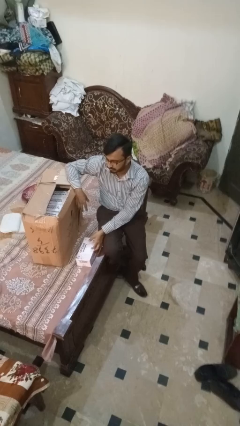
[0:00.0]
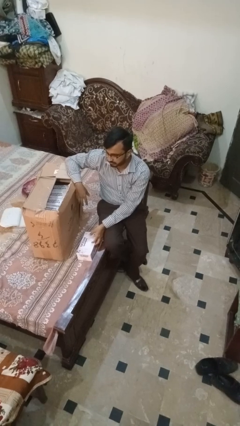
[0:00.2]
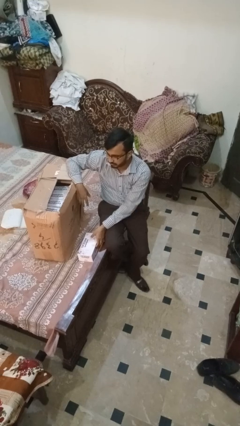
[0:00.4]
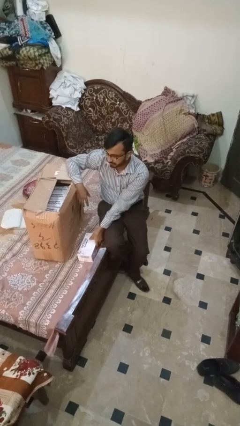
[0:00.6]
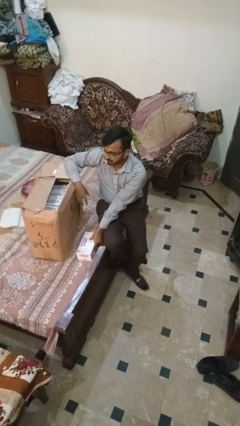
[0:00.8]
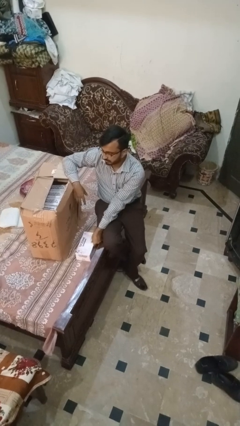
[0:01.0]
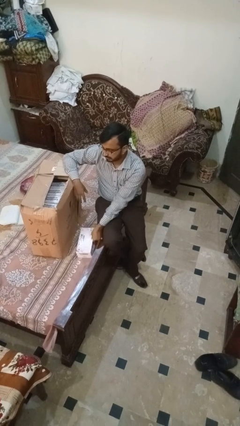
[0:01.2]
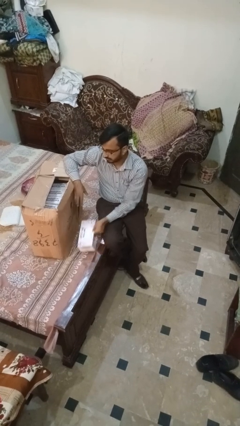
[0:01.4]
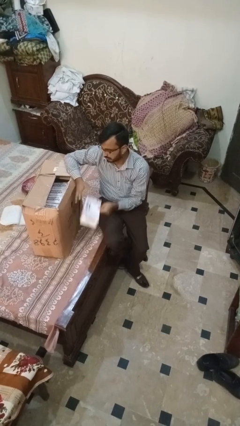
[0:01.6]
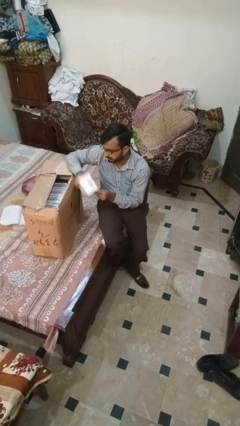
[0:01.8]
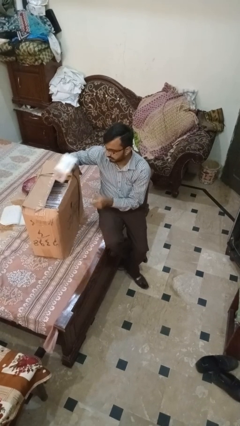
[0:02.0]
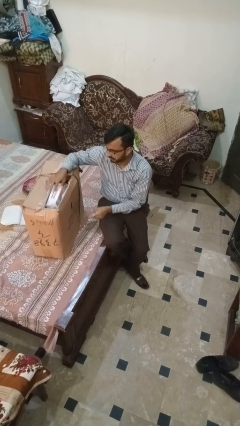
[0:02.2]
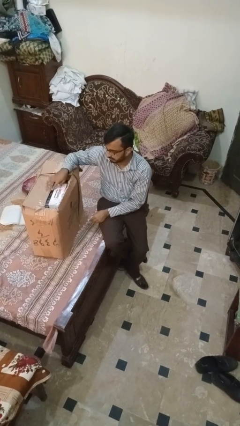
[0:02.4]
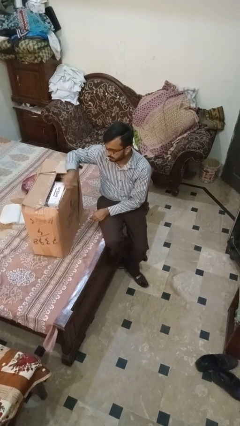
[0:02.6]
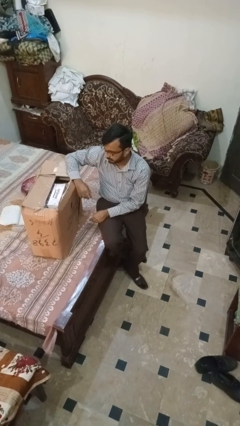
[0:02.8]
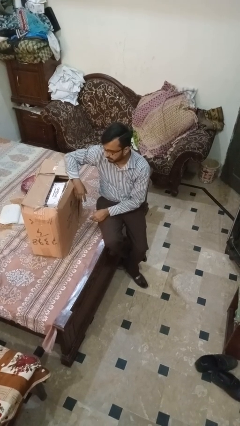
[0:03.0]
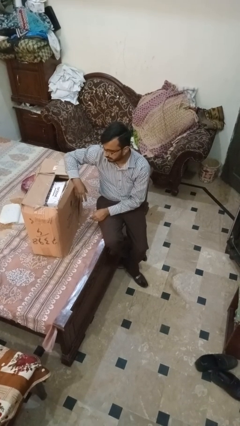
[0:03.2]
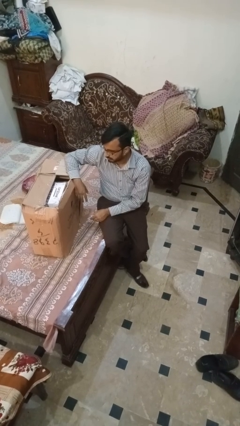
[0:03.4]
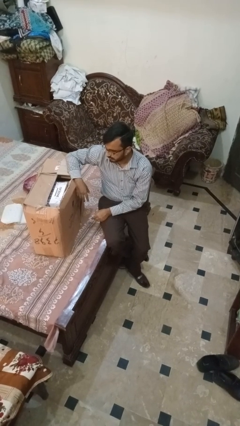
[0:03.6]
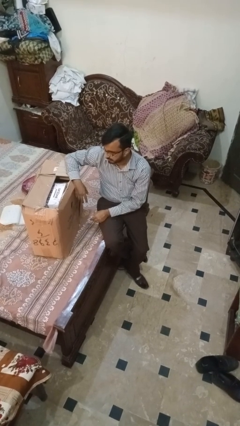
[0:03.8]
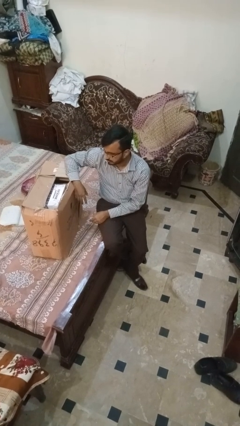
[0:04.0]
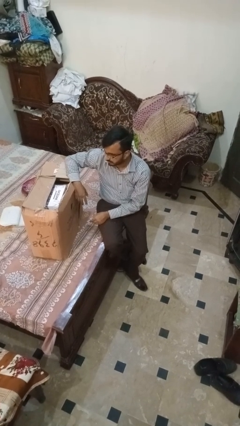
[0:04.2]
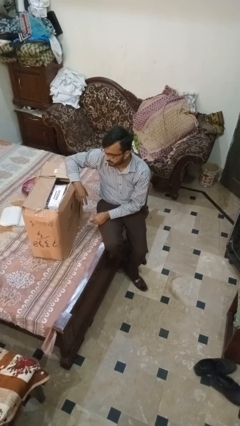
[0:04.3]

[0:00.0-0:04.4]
person puts object into box

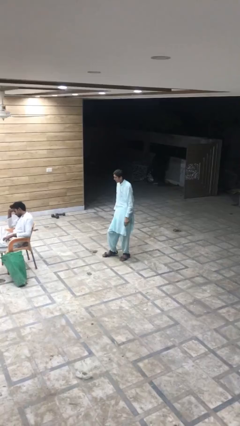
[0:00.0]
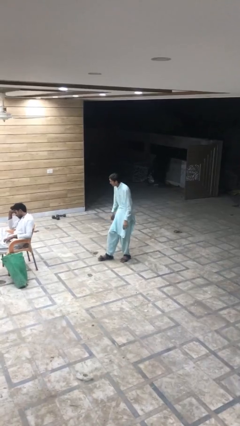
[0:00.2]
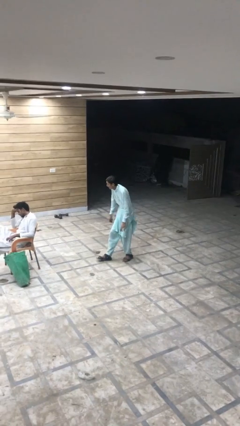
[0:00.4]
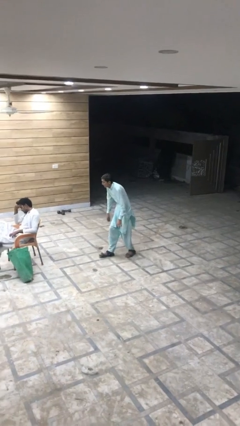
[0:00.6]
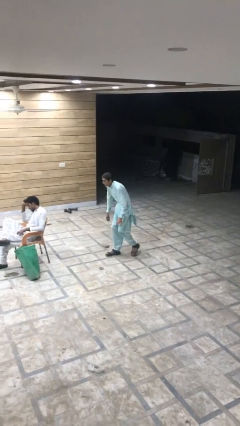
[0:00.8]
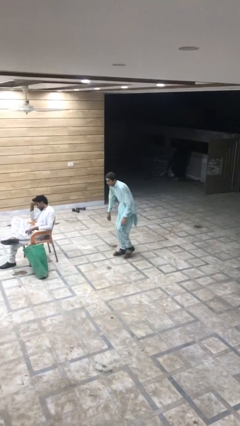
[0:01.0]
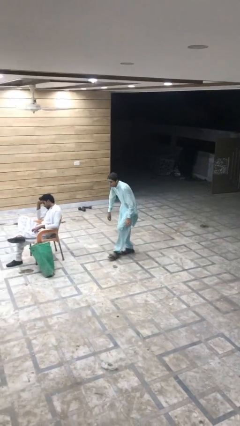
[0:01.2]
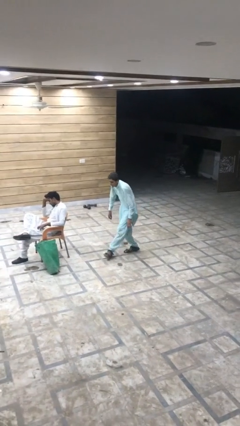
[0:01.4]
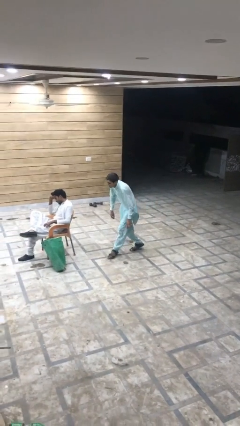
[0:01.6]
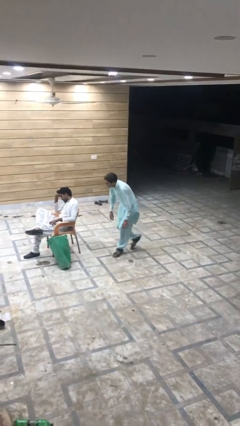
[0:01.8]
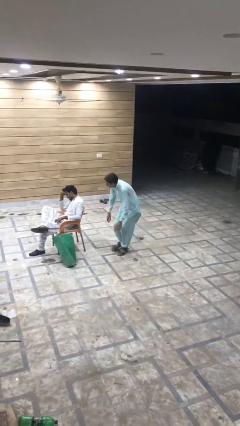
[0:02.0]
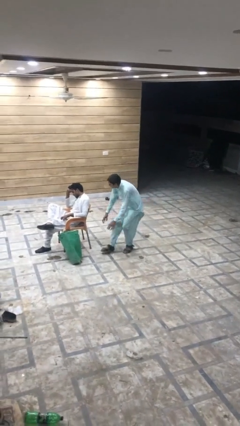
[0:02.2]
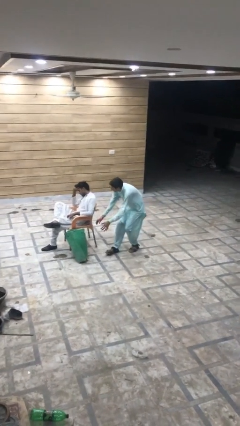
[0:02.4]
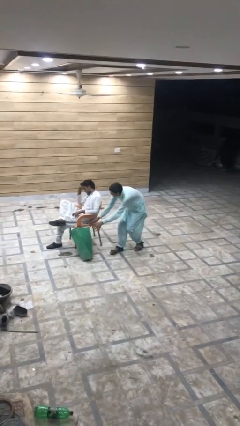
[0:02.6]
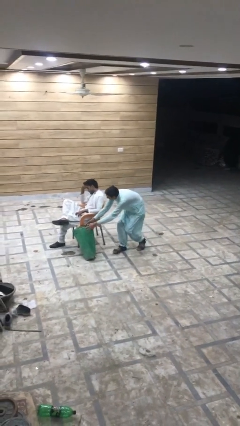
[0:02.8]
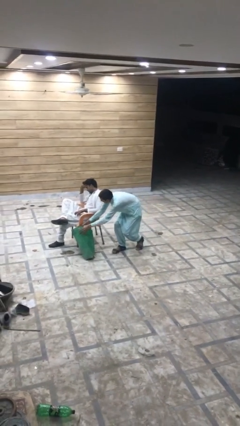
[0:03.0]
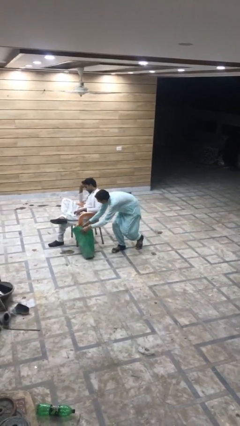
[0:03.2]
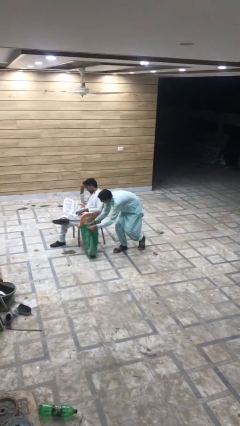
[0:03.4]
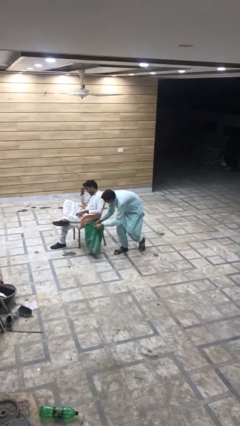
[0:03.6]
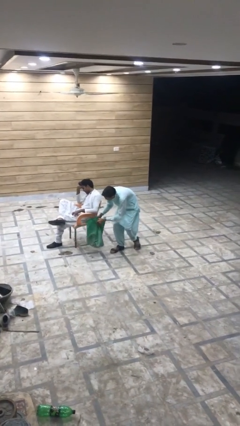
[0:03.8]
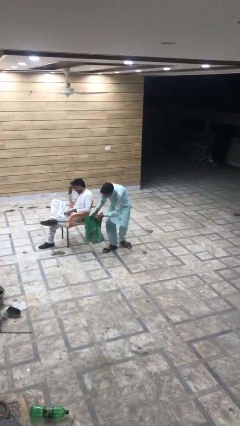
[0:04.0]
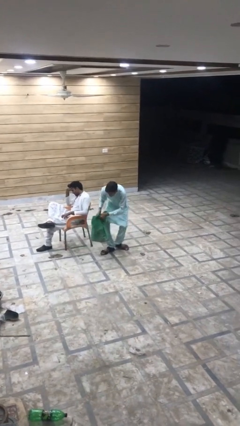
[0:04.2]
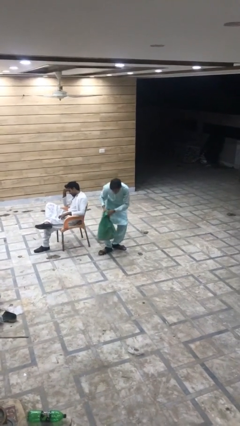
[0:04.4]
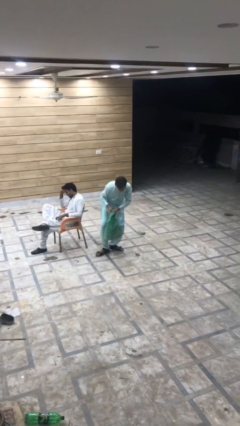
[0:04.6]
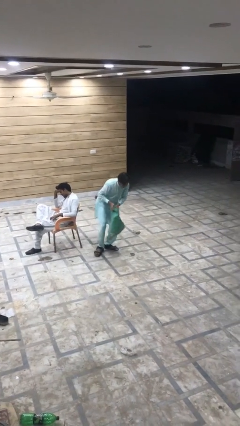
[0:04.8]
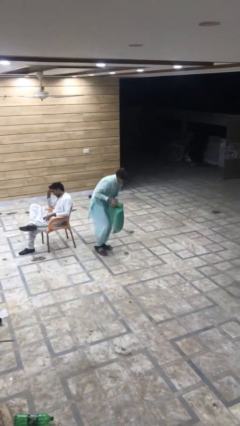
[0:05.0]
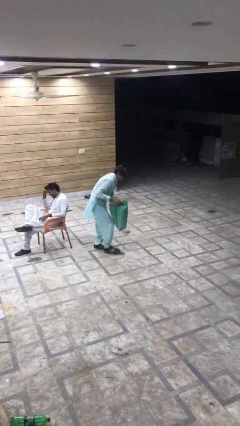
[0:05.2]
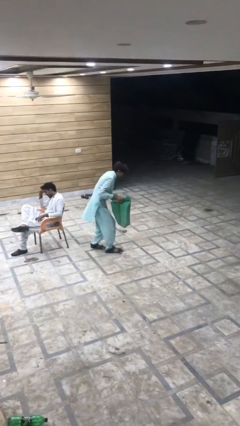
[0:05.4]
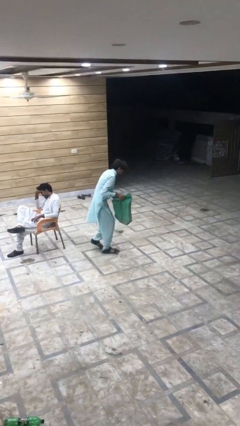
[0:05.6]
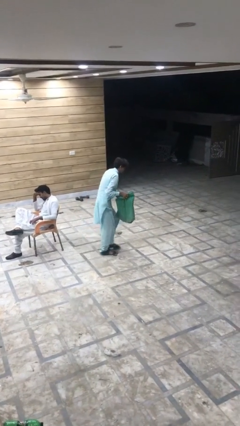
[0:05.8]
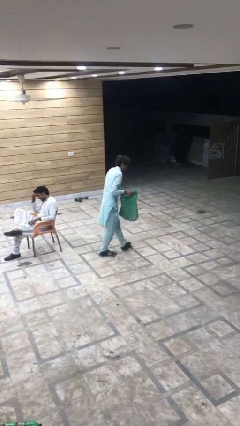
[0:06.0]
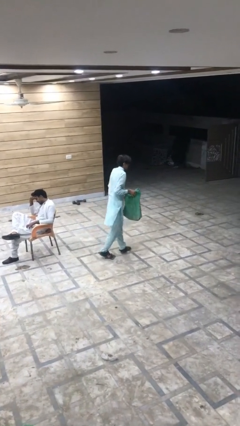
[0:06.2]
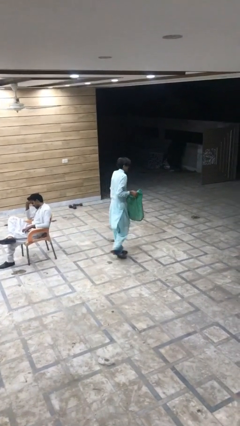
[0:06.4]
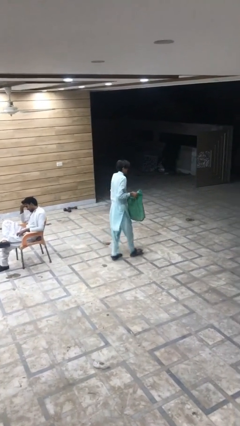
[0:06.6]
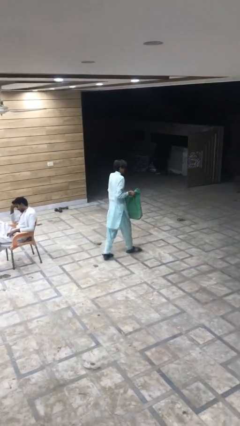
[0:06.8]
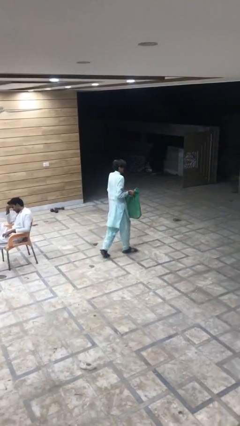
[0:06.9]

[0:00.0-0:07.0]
person steals object from person

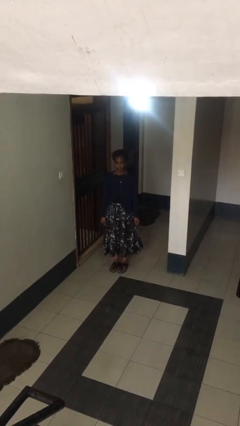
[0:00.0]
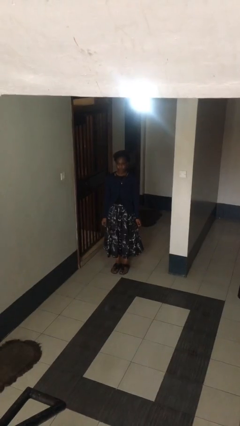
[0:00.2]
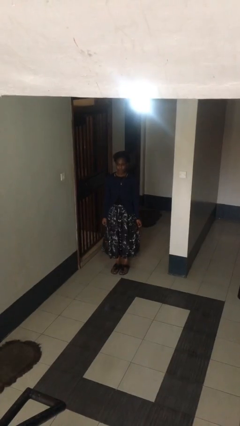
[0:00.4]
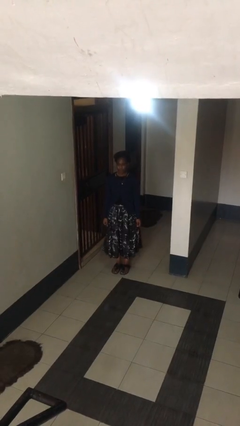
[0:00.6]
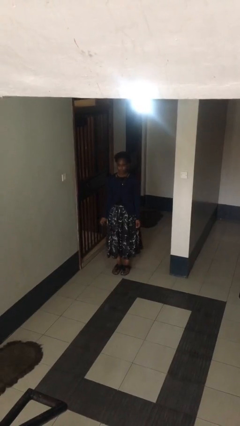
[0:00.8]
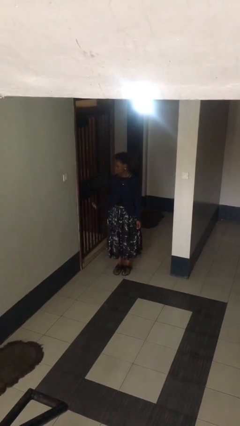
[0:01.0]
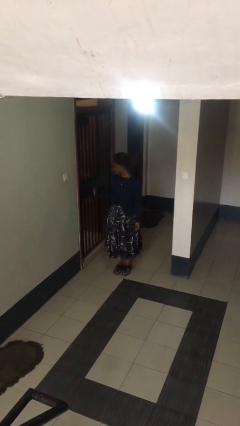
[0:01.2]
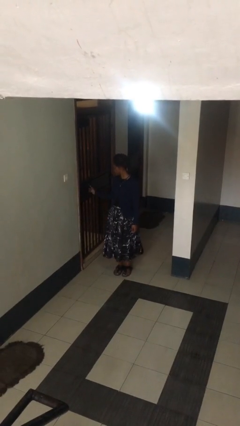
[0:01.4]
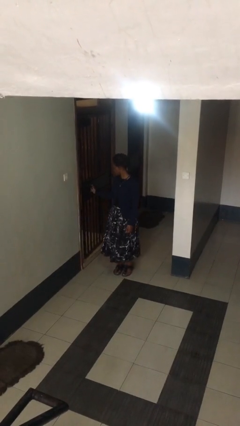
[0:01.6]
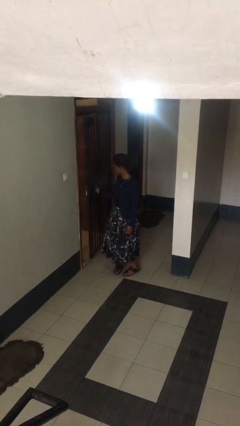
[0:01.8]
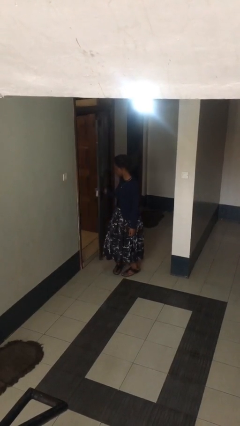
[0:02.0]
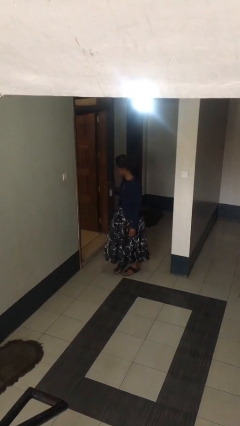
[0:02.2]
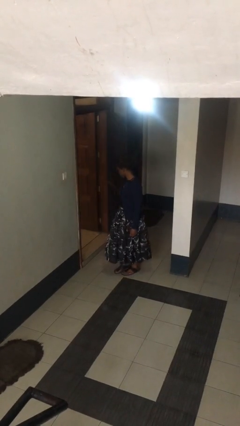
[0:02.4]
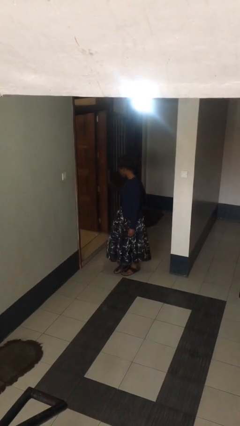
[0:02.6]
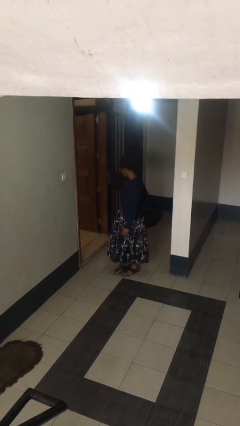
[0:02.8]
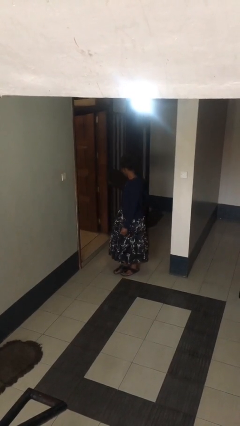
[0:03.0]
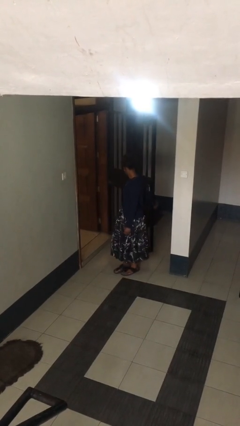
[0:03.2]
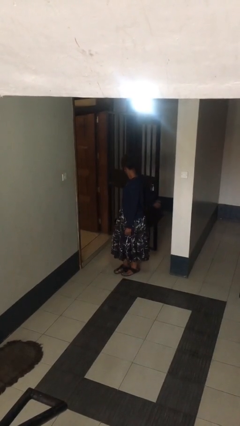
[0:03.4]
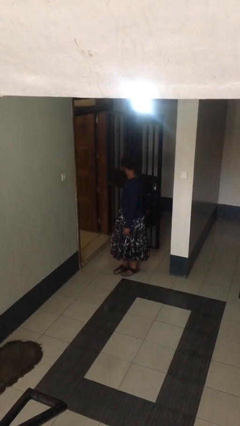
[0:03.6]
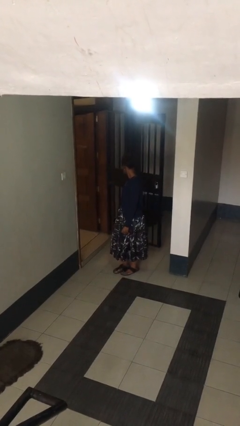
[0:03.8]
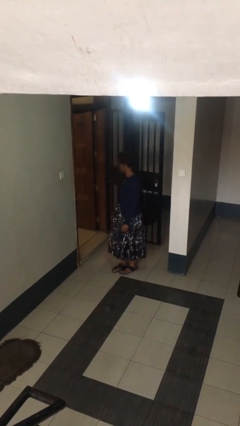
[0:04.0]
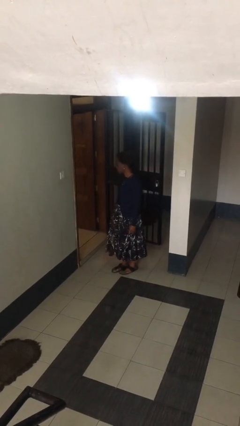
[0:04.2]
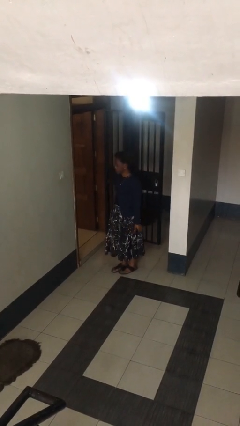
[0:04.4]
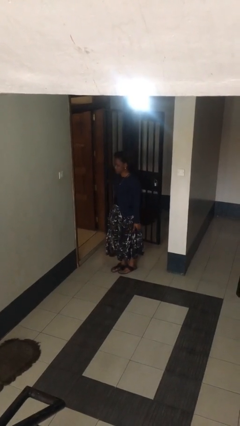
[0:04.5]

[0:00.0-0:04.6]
person opens facility door

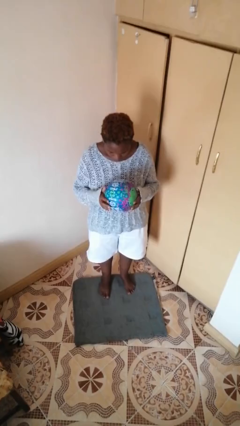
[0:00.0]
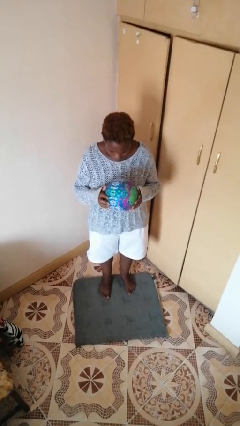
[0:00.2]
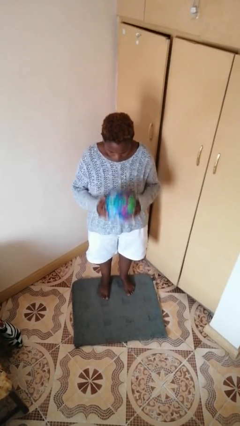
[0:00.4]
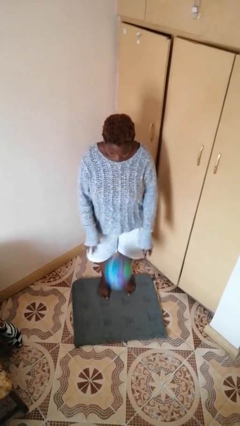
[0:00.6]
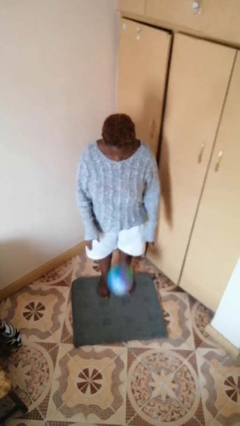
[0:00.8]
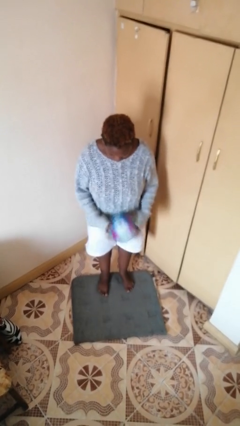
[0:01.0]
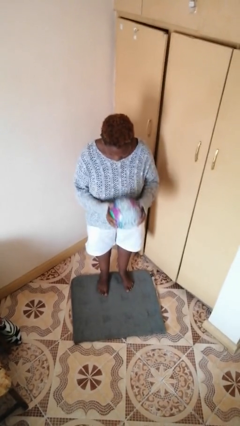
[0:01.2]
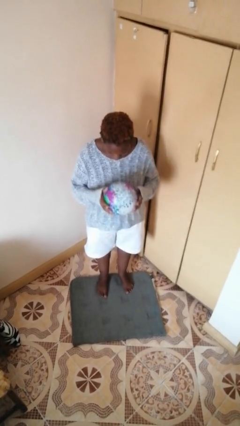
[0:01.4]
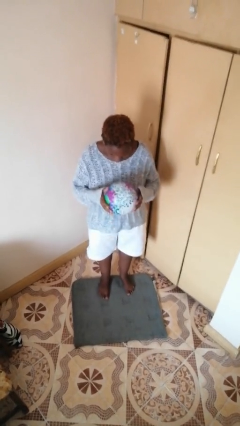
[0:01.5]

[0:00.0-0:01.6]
person bounces ball on floor

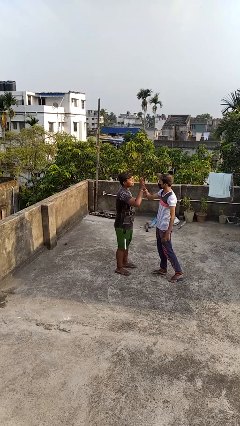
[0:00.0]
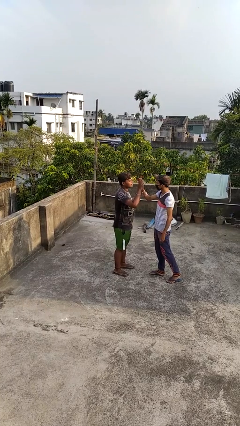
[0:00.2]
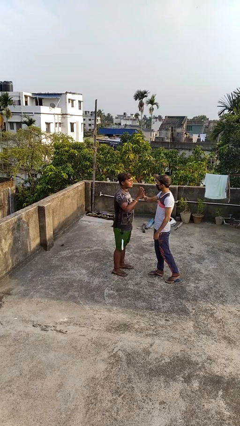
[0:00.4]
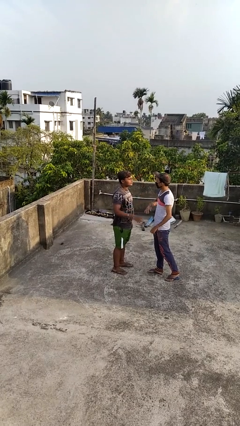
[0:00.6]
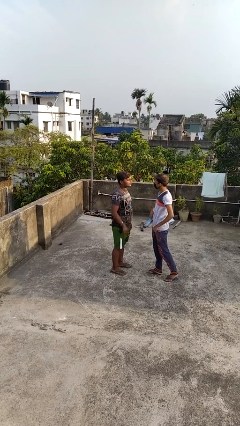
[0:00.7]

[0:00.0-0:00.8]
person highfives hand
